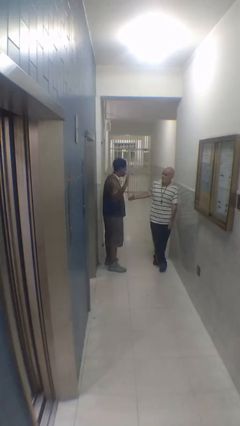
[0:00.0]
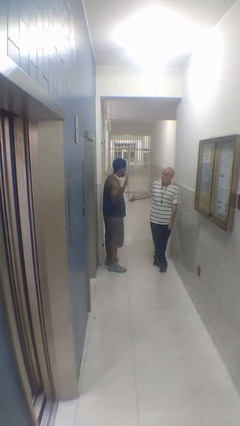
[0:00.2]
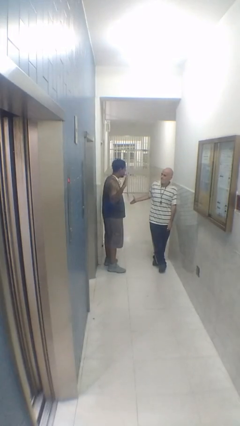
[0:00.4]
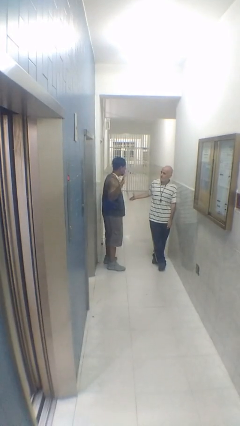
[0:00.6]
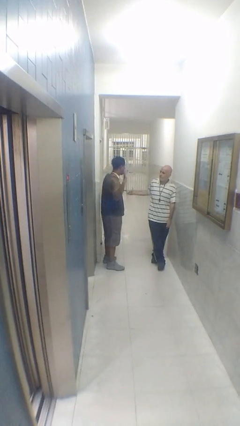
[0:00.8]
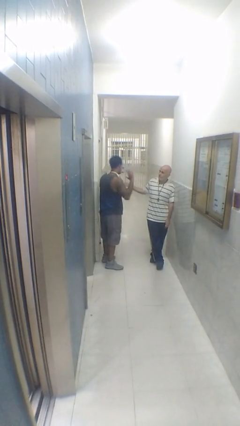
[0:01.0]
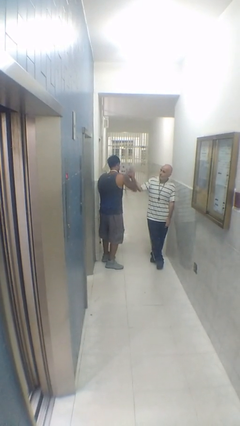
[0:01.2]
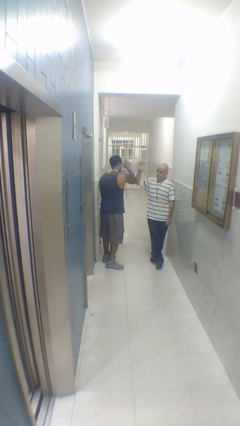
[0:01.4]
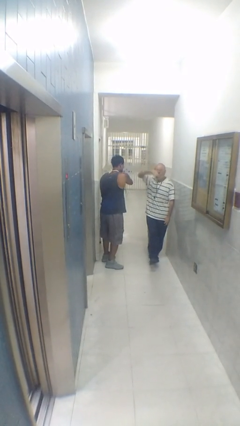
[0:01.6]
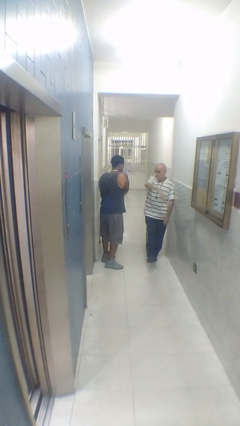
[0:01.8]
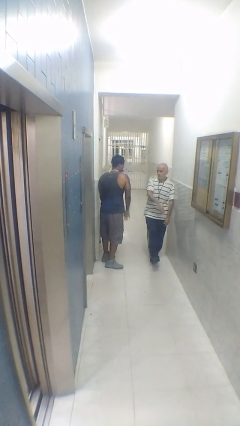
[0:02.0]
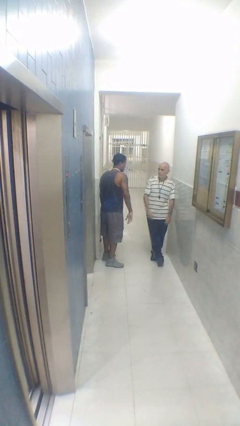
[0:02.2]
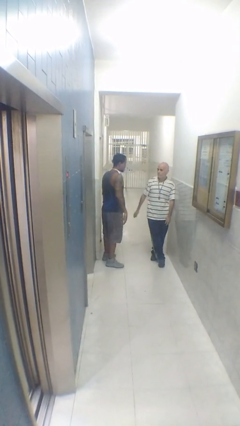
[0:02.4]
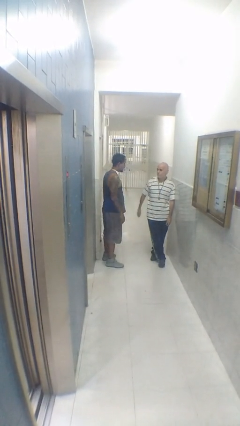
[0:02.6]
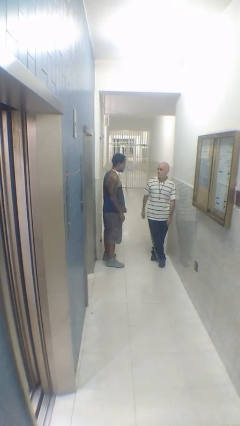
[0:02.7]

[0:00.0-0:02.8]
person highfives hand

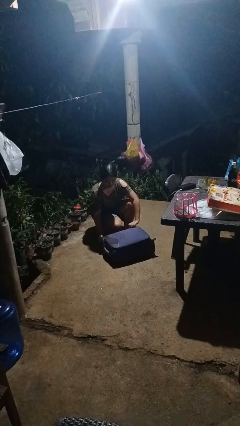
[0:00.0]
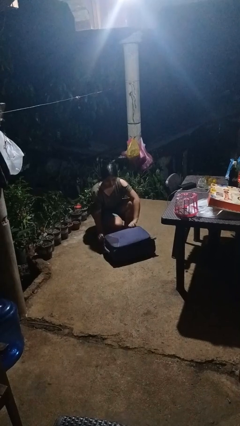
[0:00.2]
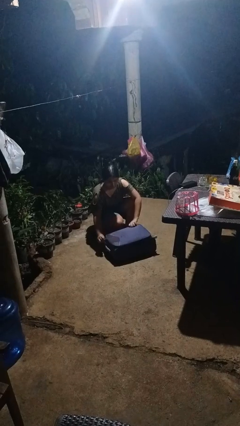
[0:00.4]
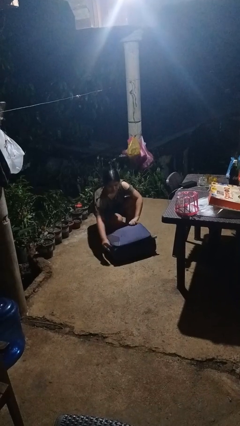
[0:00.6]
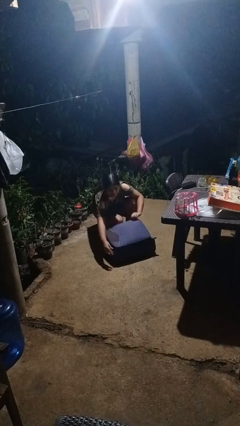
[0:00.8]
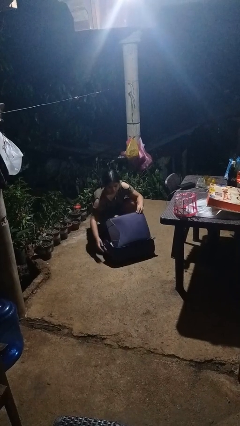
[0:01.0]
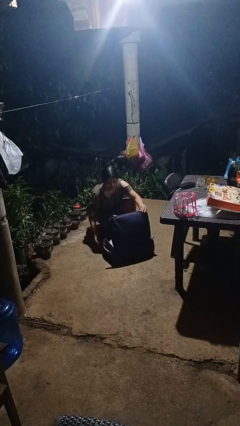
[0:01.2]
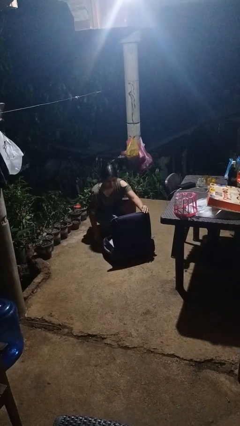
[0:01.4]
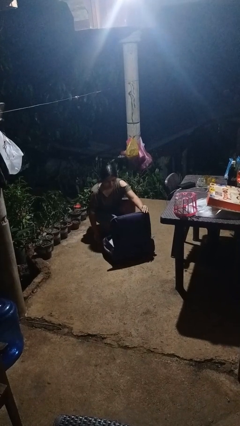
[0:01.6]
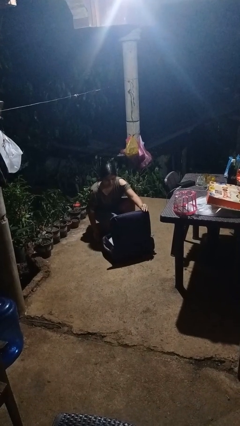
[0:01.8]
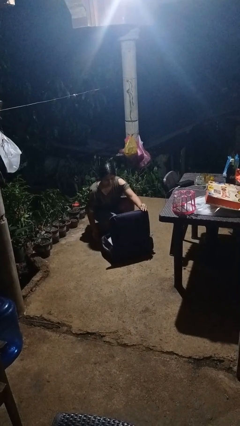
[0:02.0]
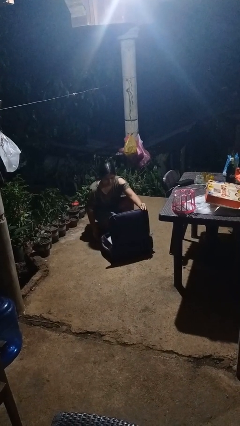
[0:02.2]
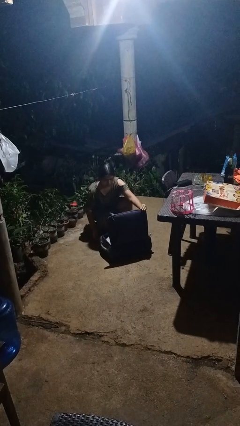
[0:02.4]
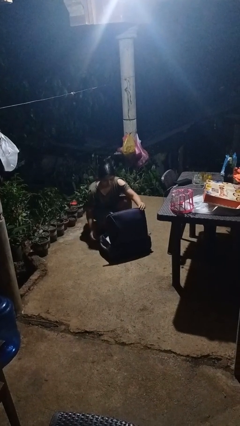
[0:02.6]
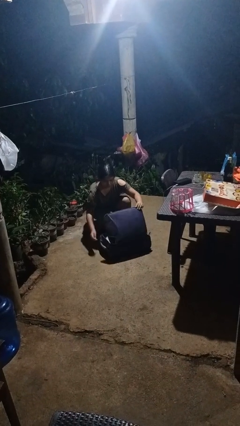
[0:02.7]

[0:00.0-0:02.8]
person opens suitcase

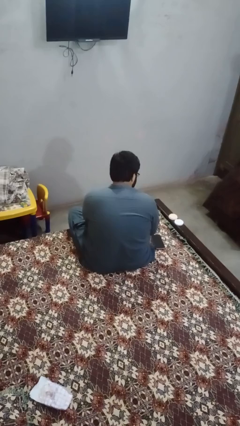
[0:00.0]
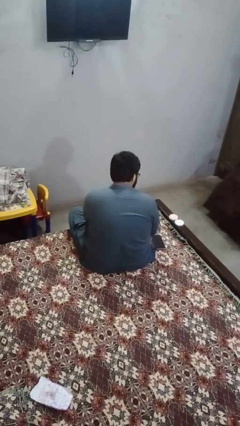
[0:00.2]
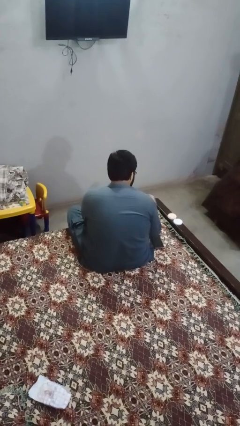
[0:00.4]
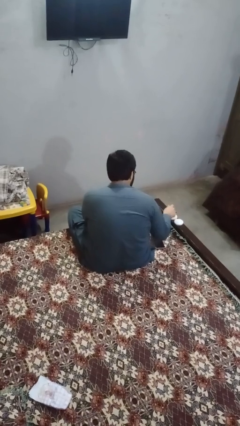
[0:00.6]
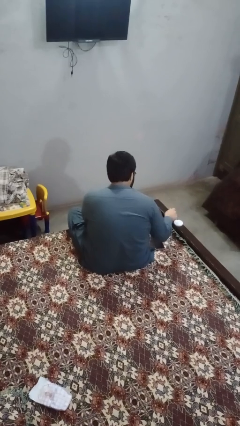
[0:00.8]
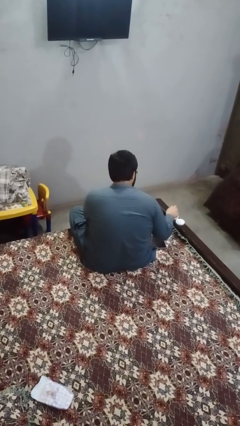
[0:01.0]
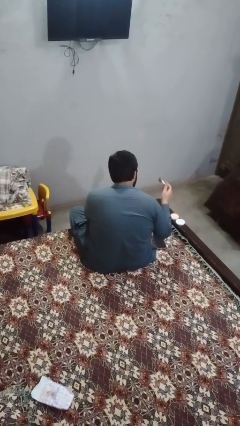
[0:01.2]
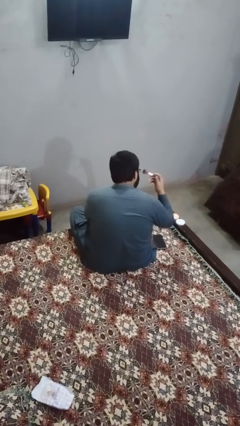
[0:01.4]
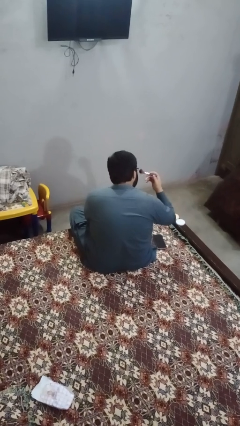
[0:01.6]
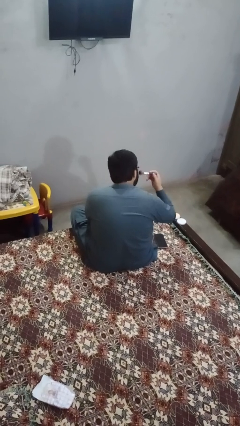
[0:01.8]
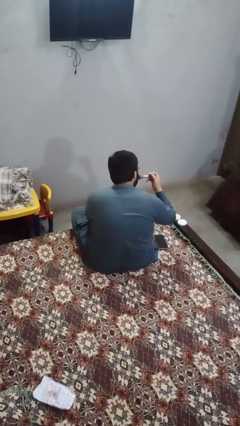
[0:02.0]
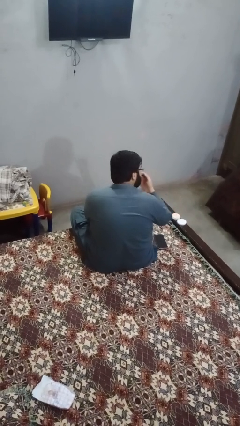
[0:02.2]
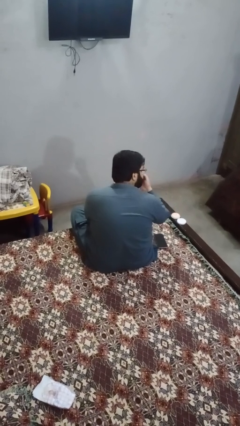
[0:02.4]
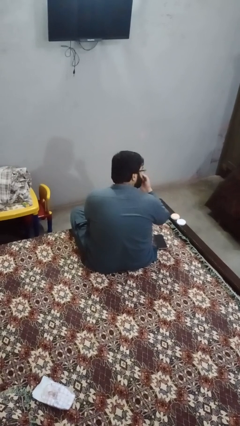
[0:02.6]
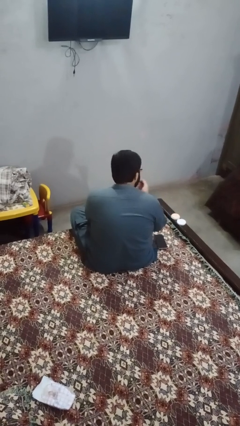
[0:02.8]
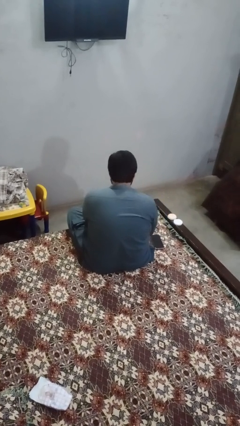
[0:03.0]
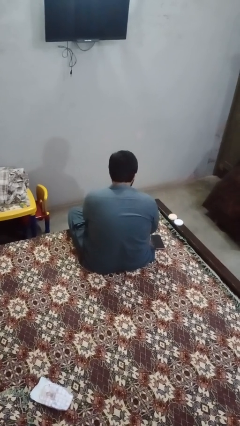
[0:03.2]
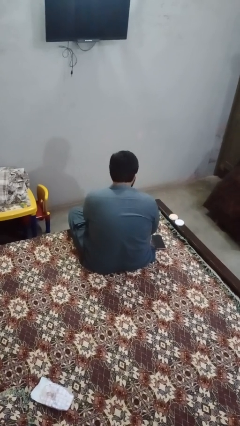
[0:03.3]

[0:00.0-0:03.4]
person applies foundation makeup

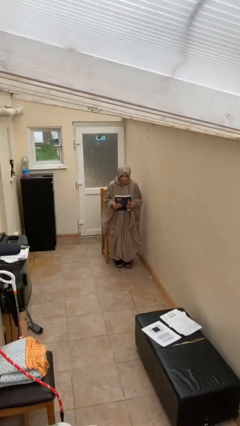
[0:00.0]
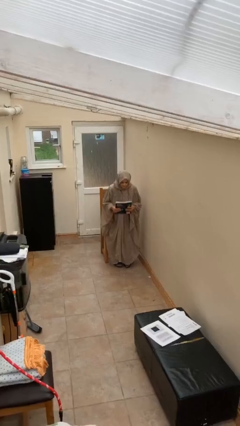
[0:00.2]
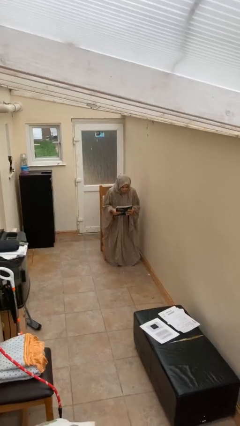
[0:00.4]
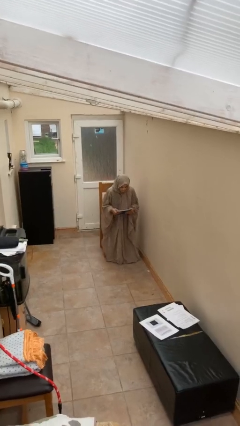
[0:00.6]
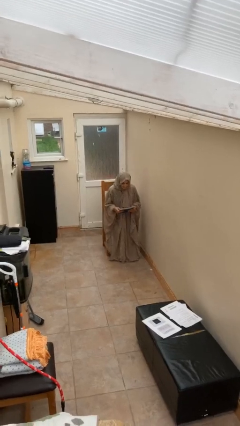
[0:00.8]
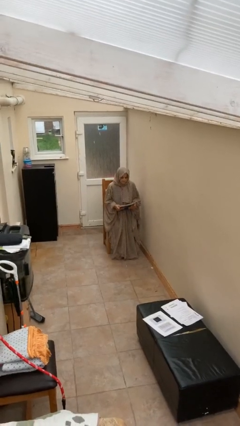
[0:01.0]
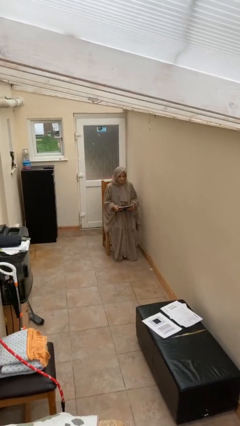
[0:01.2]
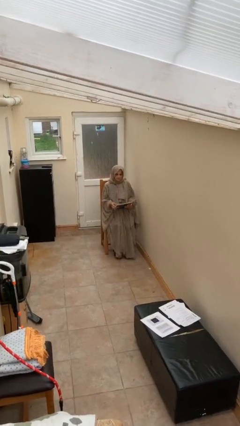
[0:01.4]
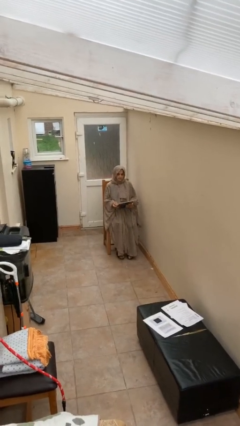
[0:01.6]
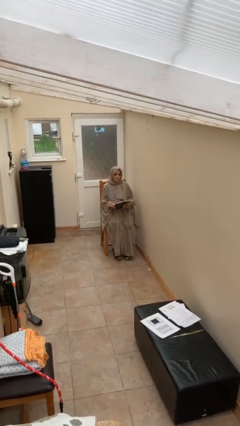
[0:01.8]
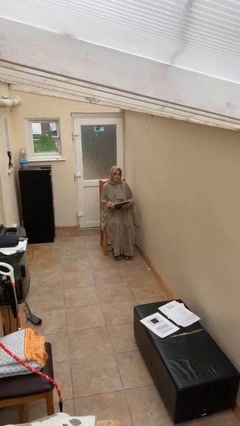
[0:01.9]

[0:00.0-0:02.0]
person sits down

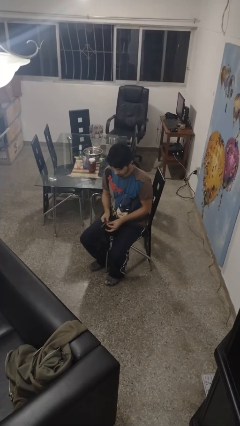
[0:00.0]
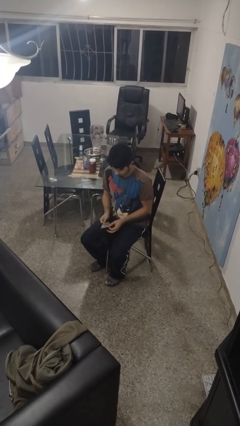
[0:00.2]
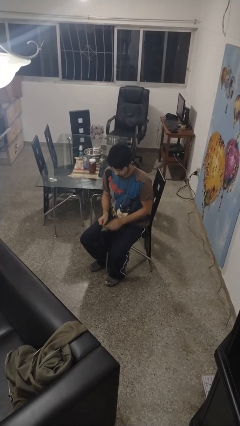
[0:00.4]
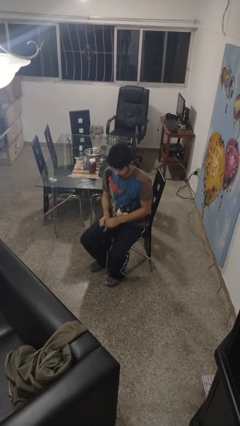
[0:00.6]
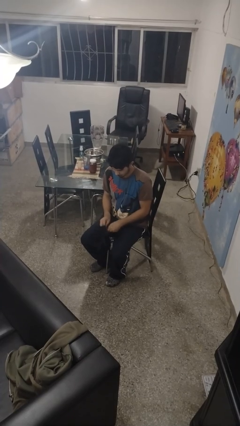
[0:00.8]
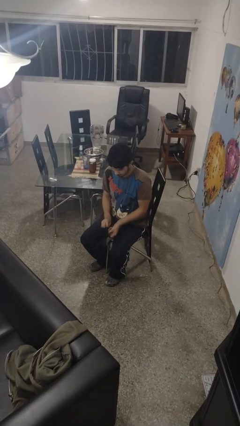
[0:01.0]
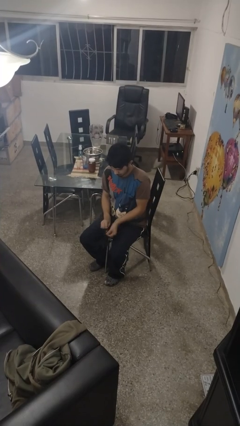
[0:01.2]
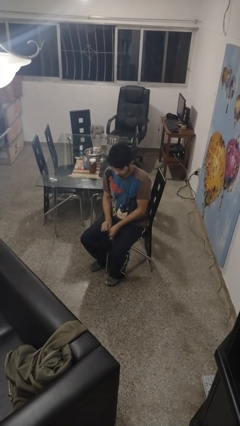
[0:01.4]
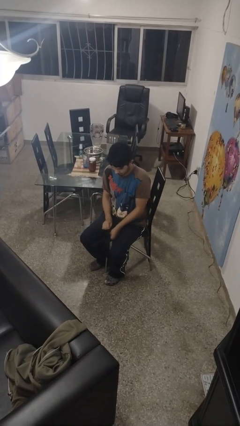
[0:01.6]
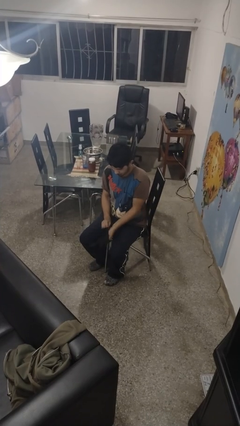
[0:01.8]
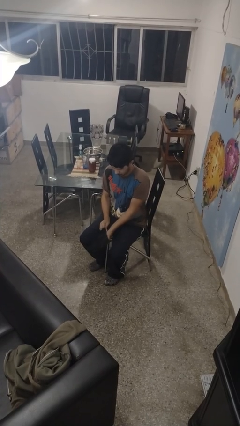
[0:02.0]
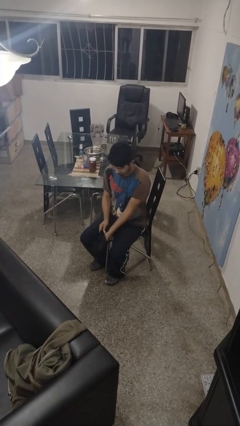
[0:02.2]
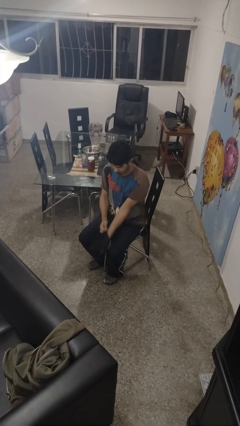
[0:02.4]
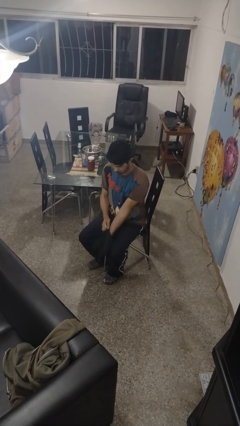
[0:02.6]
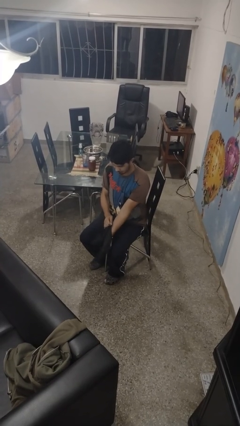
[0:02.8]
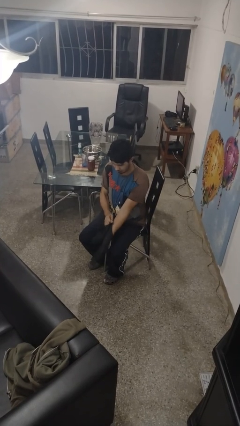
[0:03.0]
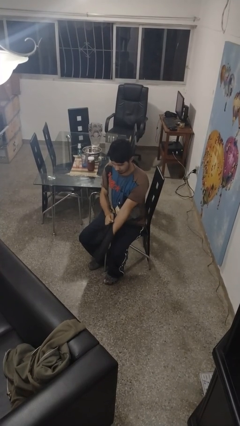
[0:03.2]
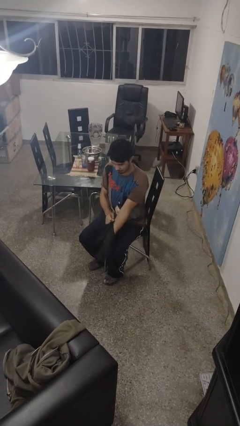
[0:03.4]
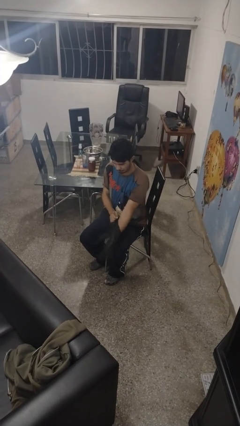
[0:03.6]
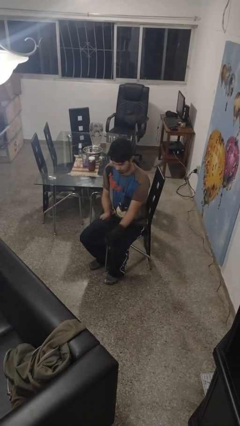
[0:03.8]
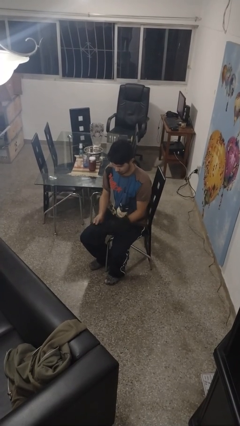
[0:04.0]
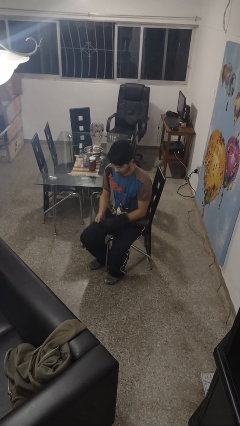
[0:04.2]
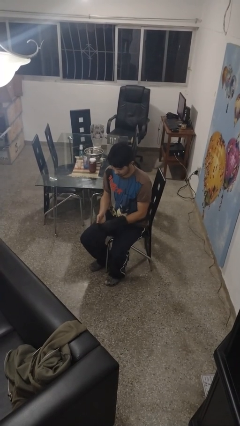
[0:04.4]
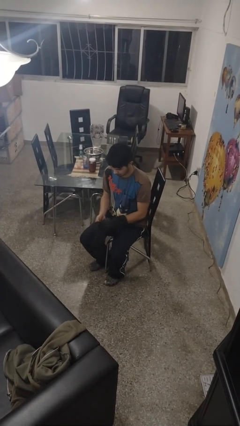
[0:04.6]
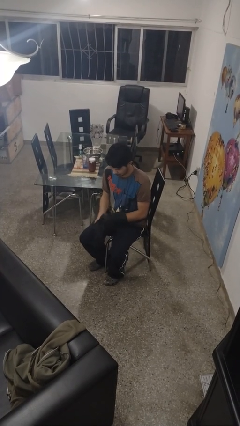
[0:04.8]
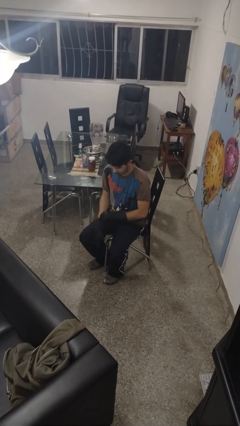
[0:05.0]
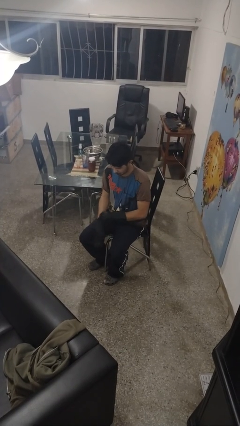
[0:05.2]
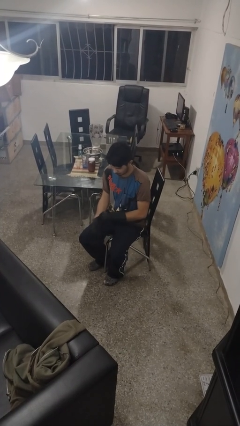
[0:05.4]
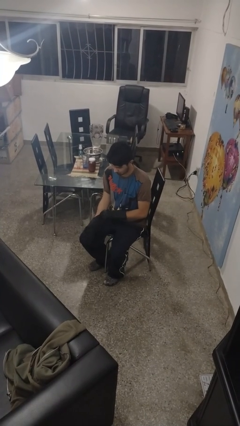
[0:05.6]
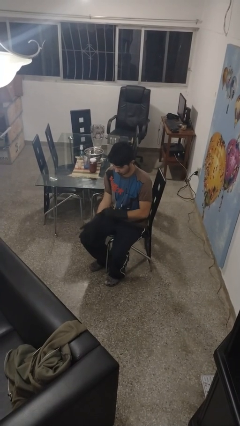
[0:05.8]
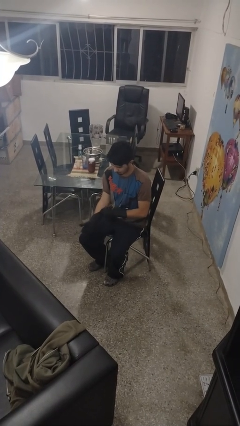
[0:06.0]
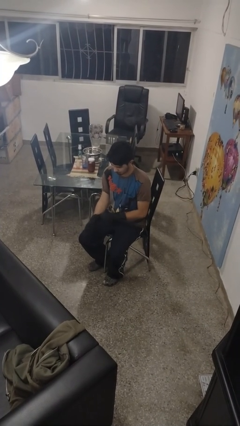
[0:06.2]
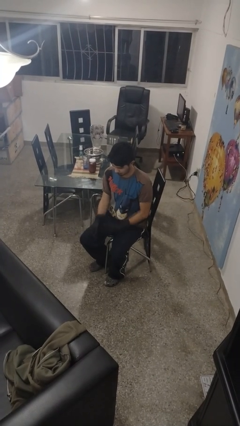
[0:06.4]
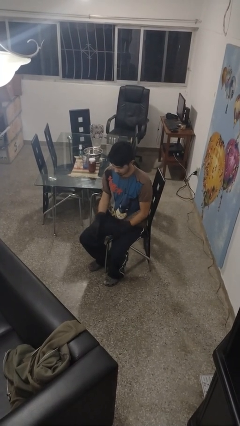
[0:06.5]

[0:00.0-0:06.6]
person puts on gloves

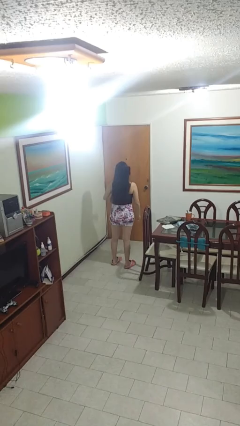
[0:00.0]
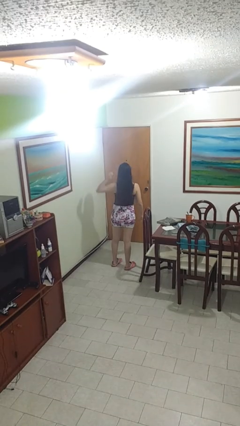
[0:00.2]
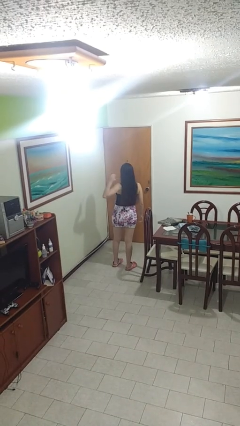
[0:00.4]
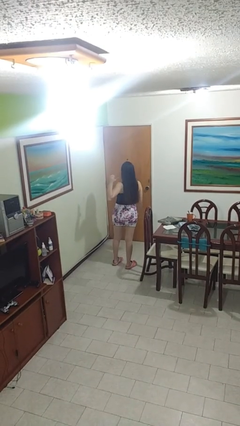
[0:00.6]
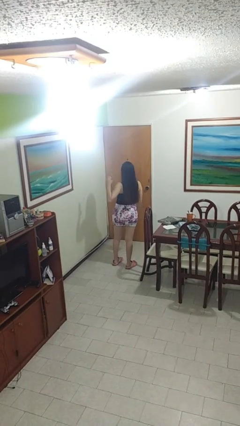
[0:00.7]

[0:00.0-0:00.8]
person gestures behind me
